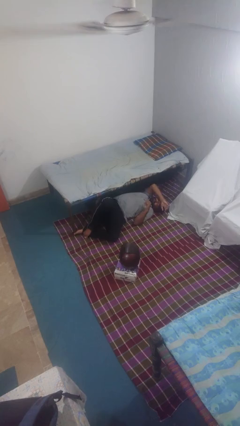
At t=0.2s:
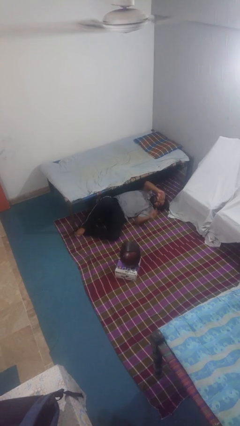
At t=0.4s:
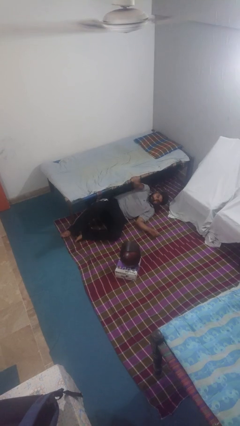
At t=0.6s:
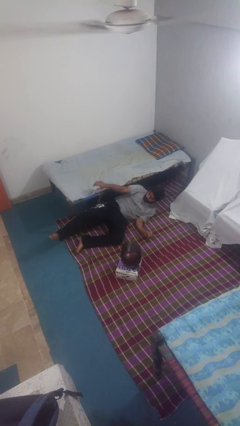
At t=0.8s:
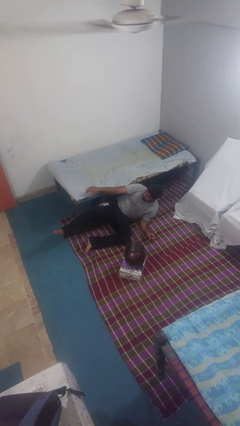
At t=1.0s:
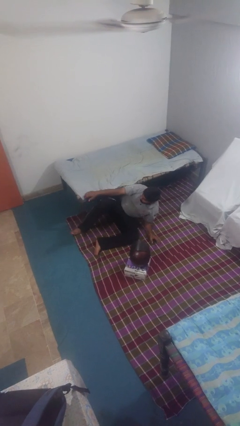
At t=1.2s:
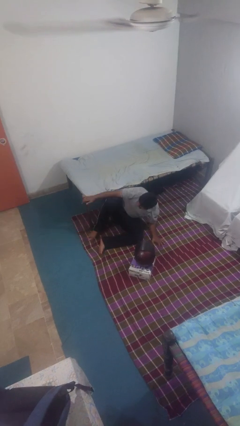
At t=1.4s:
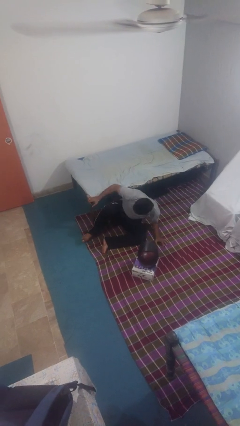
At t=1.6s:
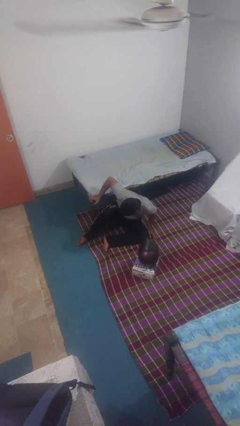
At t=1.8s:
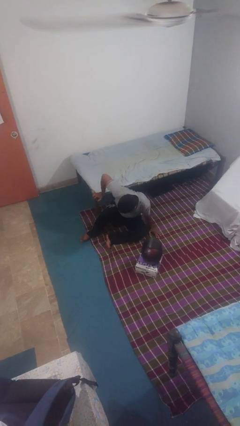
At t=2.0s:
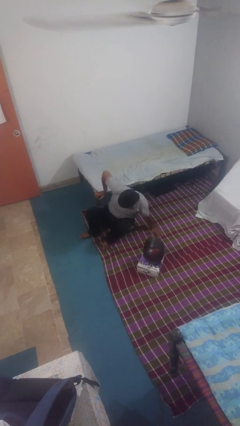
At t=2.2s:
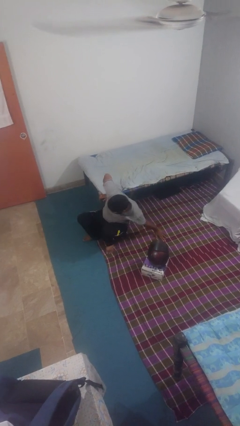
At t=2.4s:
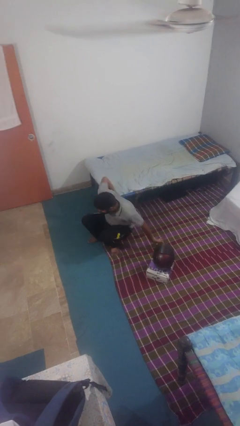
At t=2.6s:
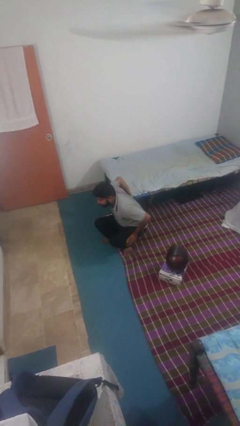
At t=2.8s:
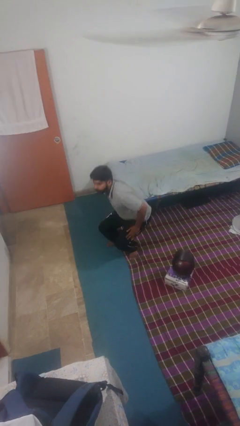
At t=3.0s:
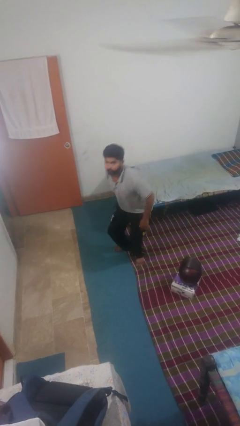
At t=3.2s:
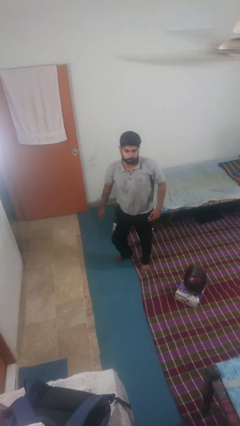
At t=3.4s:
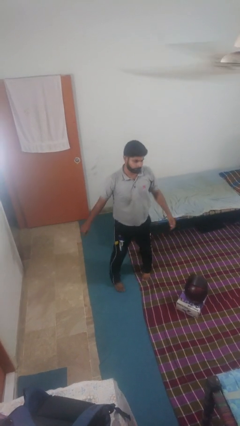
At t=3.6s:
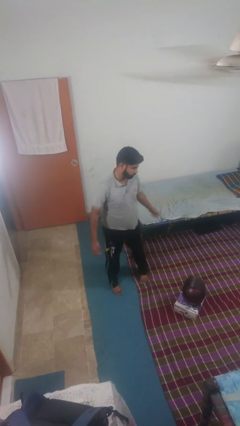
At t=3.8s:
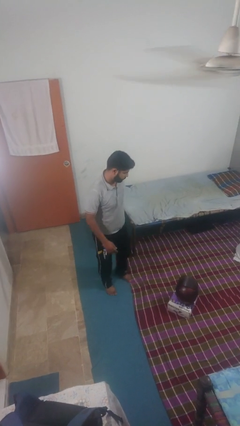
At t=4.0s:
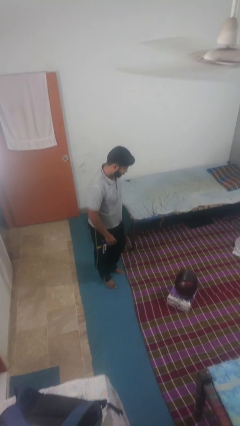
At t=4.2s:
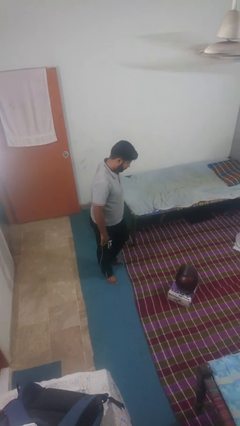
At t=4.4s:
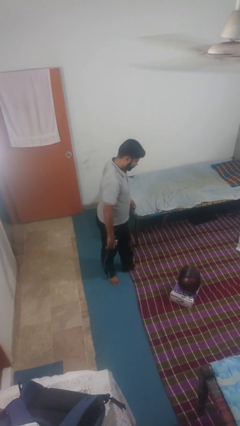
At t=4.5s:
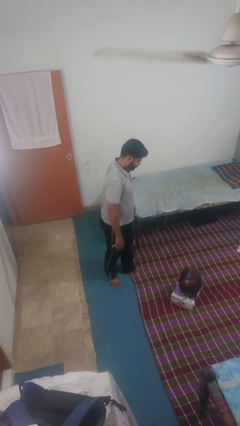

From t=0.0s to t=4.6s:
person stands up from floor

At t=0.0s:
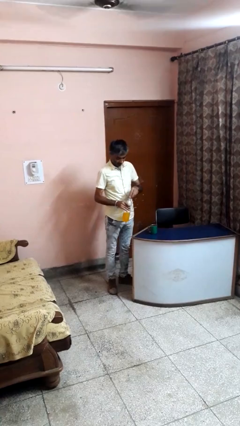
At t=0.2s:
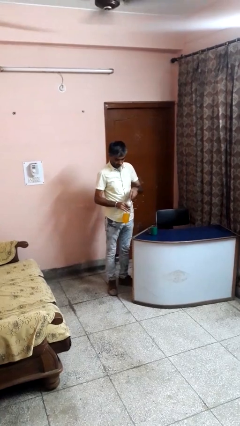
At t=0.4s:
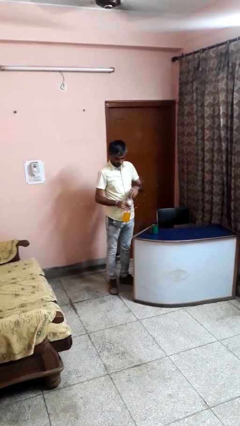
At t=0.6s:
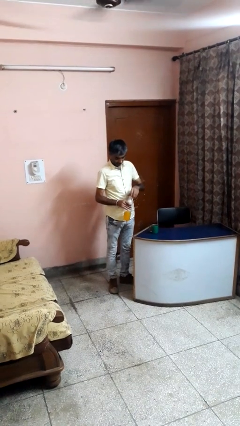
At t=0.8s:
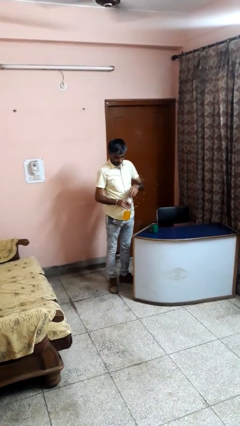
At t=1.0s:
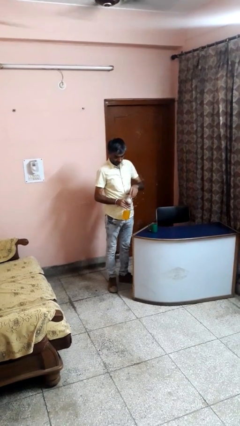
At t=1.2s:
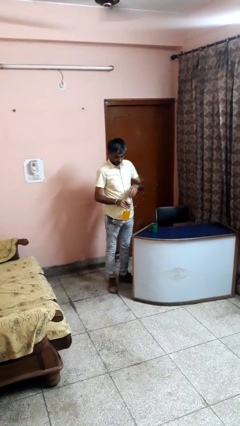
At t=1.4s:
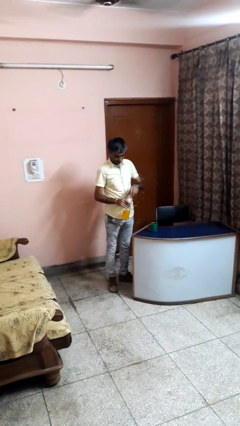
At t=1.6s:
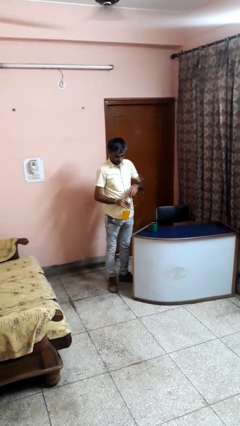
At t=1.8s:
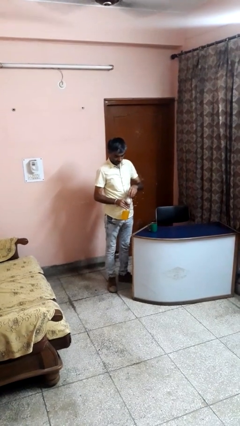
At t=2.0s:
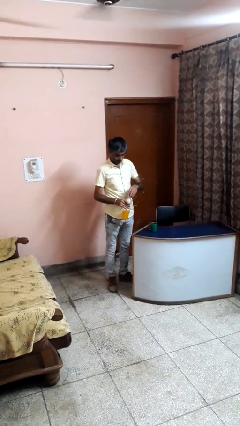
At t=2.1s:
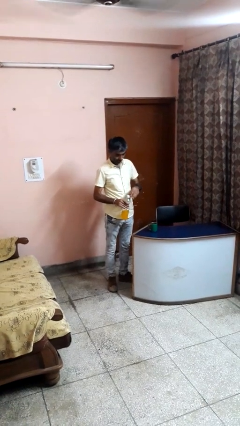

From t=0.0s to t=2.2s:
person screws lid to bottle

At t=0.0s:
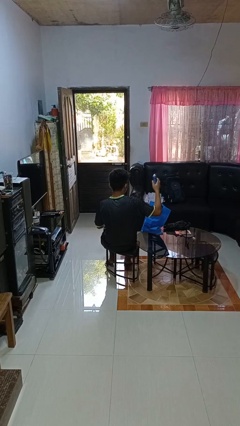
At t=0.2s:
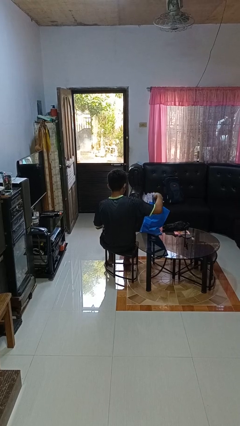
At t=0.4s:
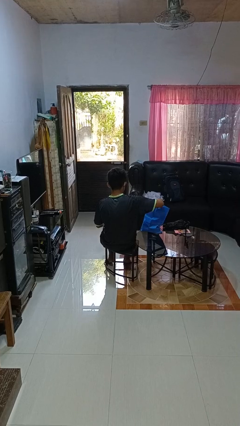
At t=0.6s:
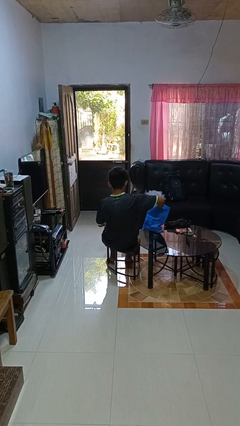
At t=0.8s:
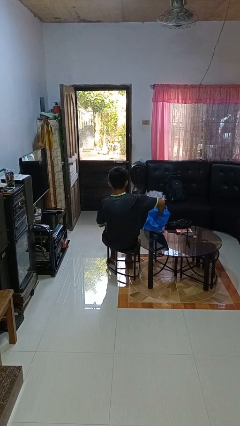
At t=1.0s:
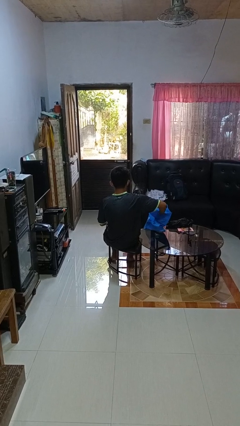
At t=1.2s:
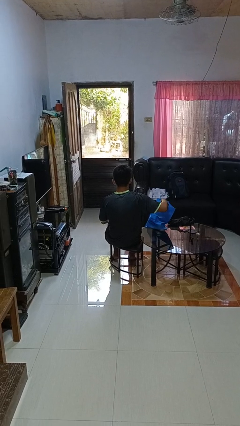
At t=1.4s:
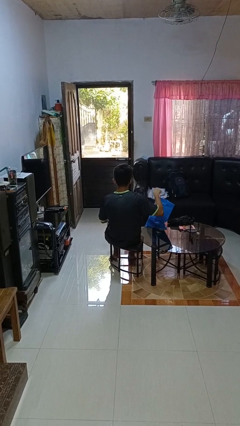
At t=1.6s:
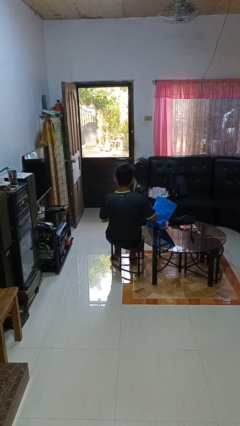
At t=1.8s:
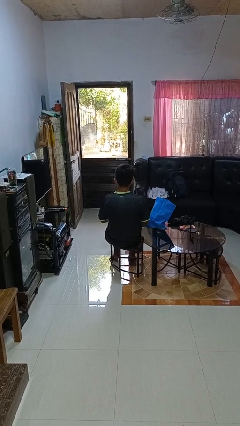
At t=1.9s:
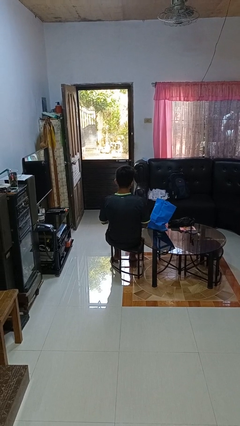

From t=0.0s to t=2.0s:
person puts object into bag

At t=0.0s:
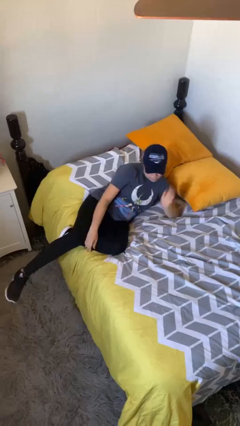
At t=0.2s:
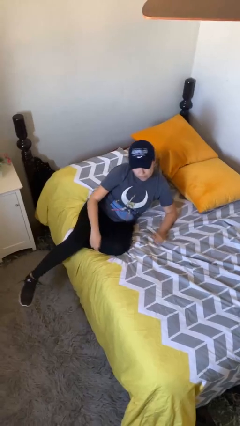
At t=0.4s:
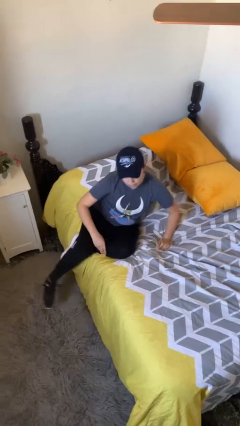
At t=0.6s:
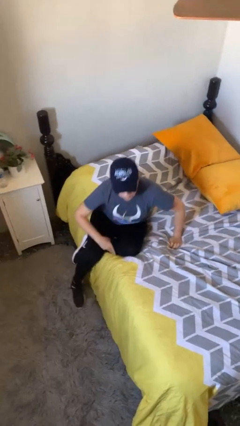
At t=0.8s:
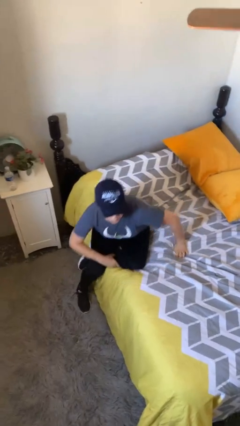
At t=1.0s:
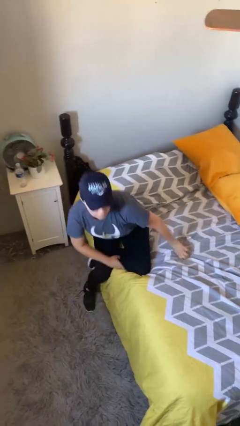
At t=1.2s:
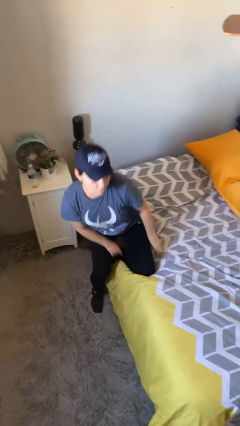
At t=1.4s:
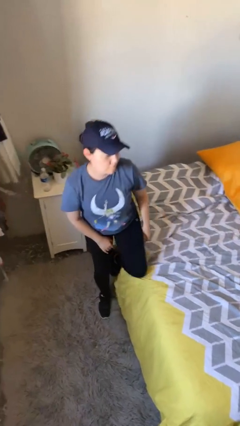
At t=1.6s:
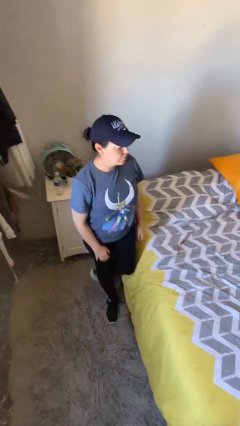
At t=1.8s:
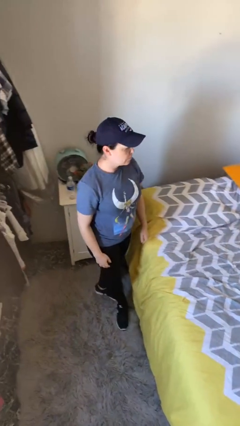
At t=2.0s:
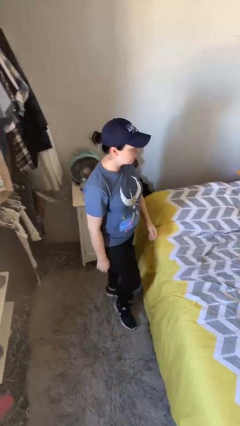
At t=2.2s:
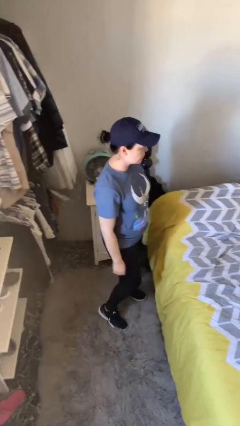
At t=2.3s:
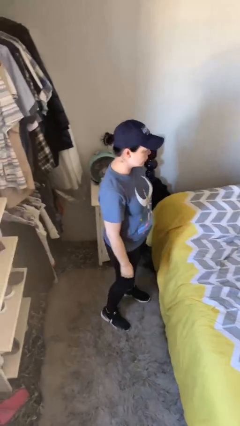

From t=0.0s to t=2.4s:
person stands up

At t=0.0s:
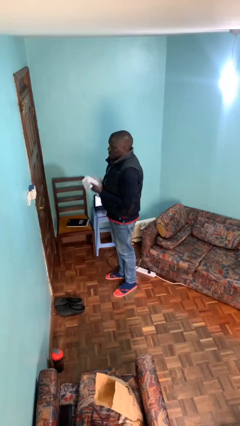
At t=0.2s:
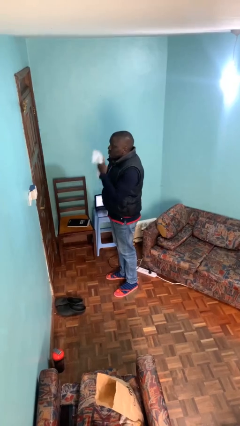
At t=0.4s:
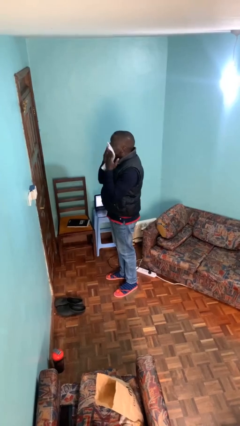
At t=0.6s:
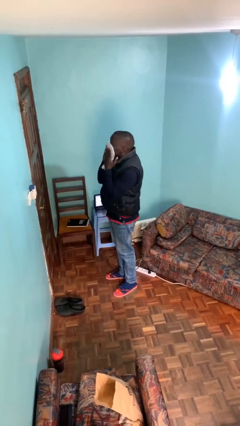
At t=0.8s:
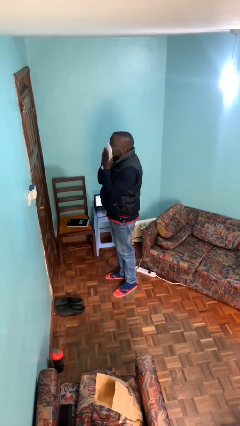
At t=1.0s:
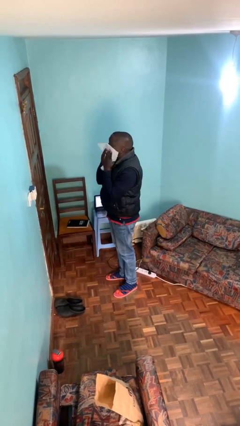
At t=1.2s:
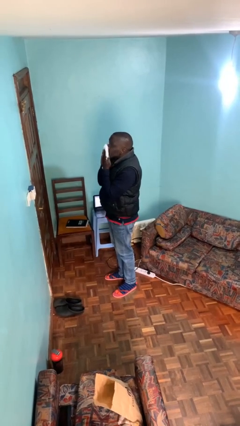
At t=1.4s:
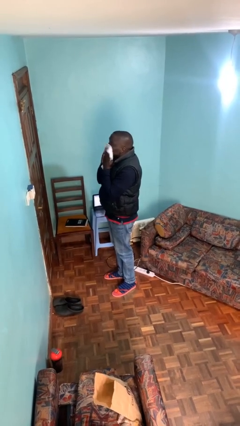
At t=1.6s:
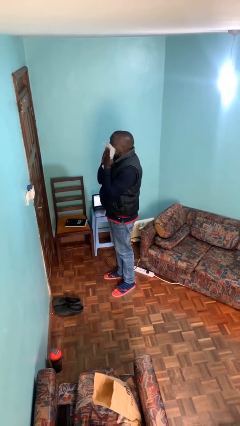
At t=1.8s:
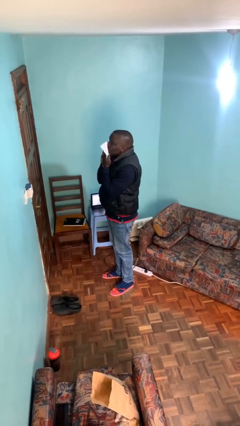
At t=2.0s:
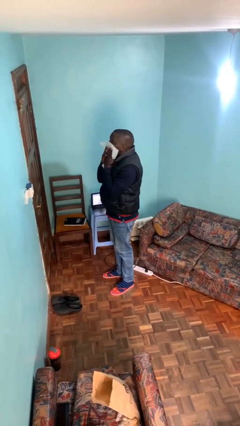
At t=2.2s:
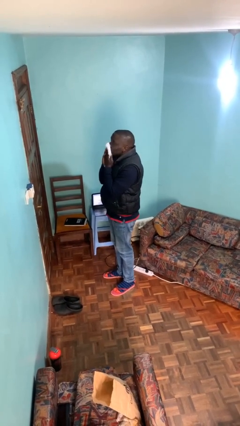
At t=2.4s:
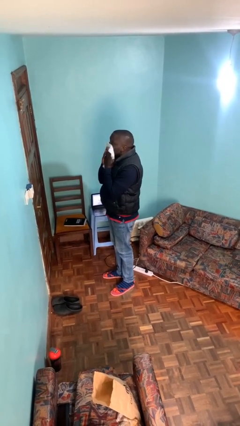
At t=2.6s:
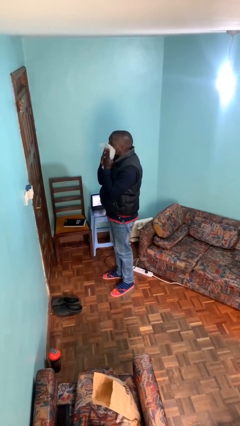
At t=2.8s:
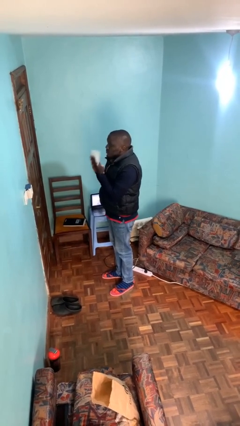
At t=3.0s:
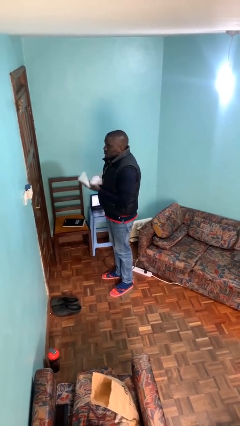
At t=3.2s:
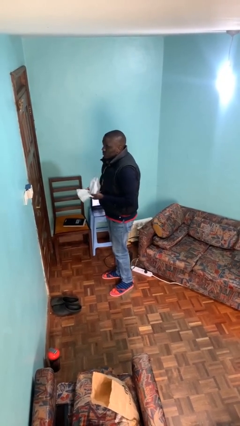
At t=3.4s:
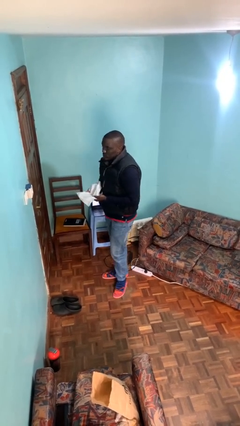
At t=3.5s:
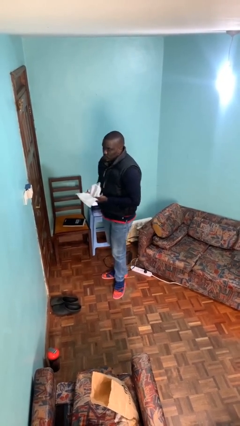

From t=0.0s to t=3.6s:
person wipes mouth with napkin

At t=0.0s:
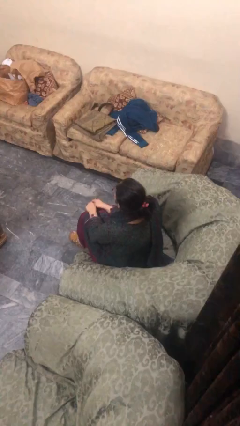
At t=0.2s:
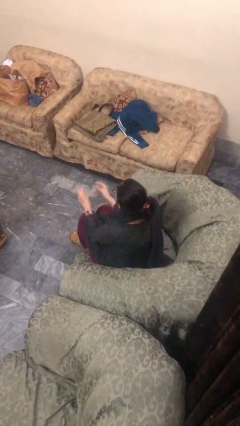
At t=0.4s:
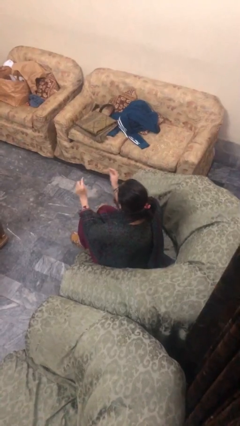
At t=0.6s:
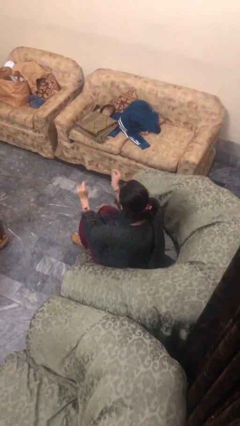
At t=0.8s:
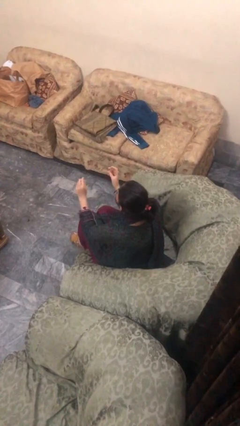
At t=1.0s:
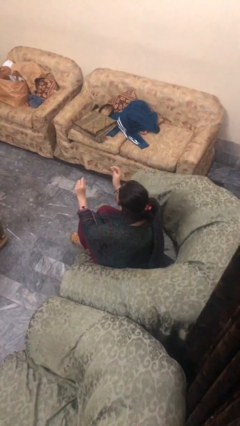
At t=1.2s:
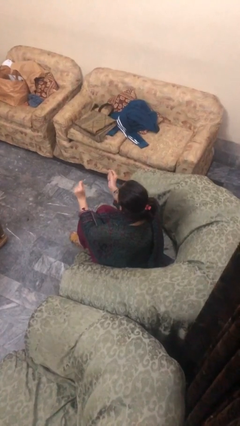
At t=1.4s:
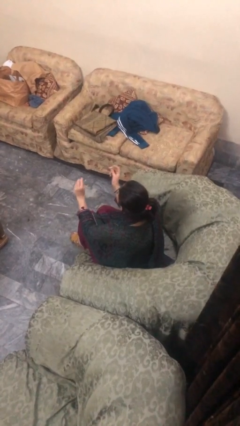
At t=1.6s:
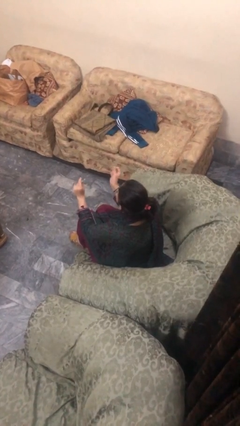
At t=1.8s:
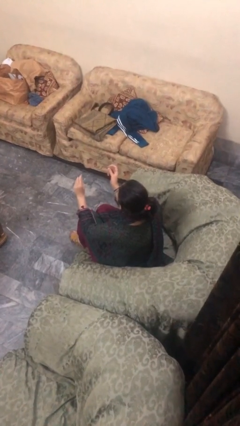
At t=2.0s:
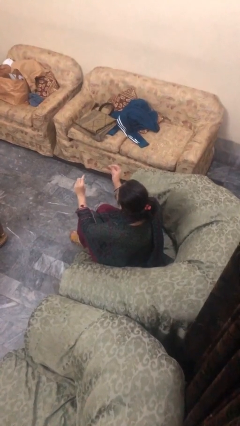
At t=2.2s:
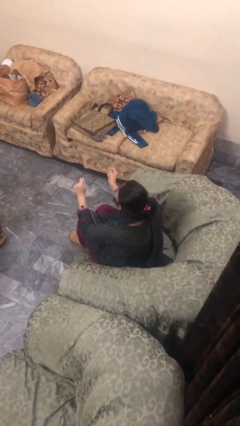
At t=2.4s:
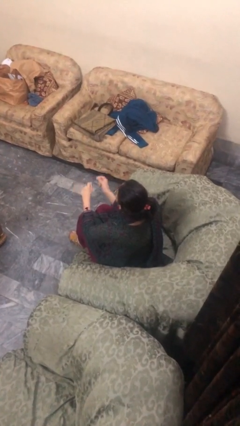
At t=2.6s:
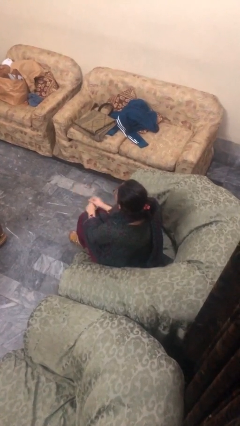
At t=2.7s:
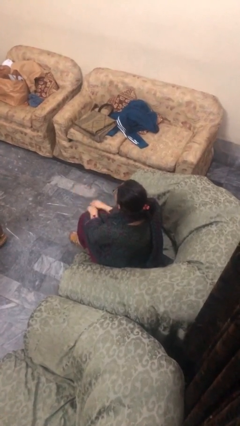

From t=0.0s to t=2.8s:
person snaps fingers
